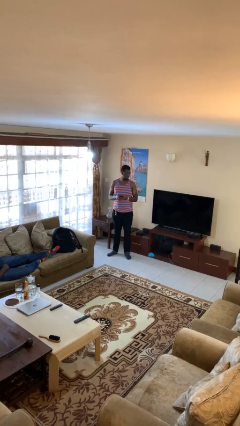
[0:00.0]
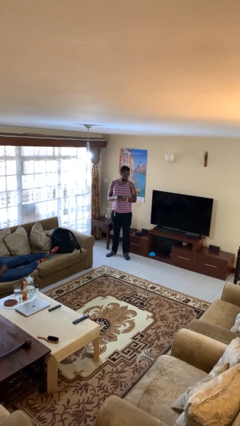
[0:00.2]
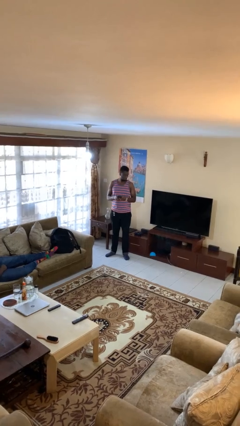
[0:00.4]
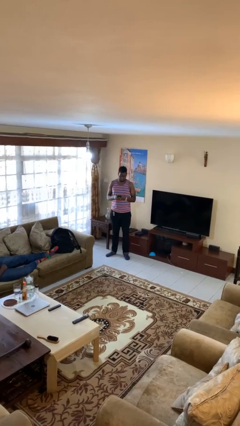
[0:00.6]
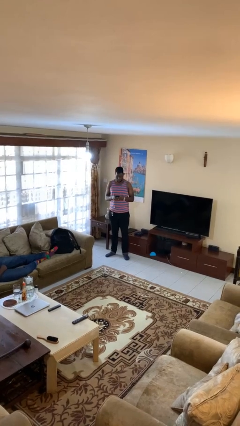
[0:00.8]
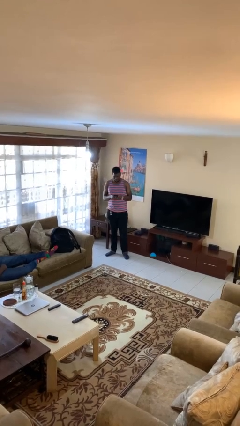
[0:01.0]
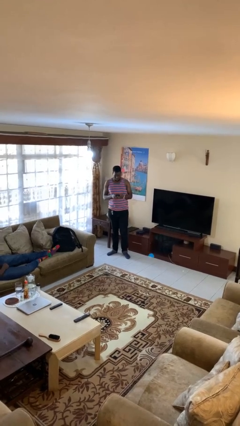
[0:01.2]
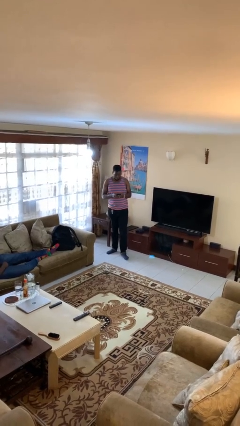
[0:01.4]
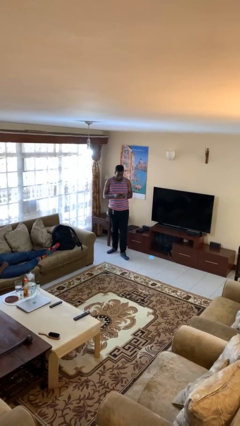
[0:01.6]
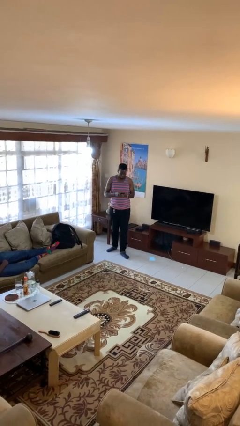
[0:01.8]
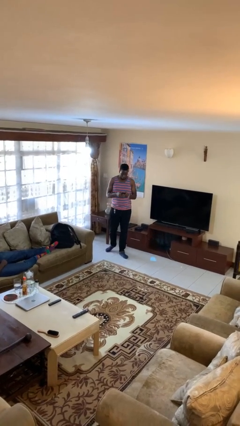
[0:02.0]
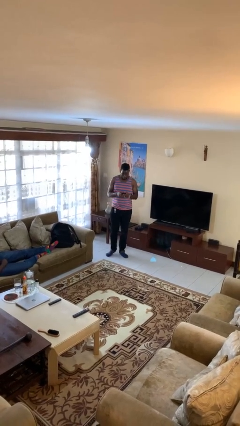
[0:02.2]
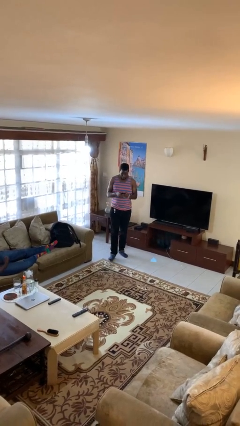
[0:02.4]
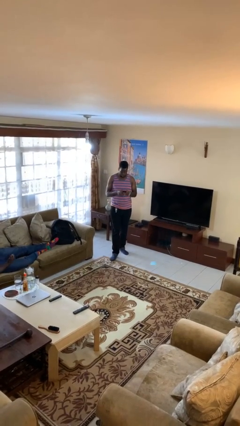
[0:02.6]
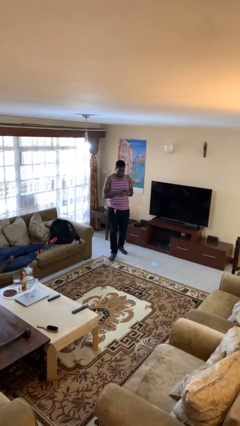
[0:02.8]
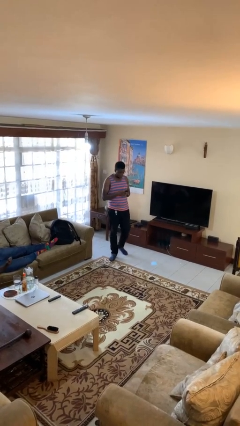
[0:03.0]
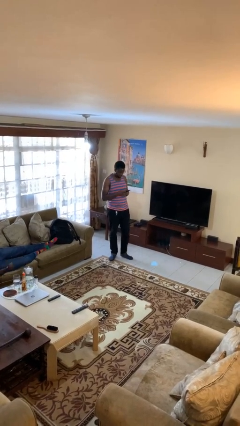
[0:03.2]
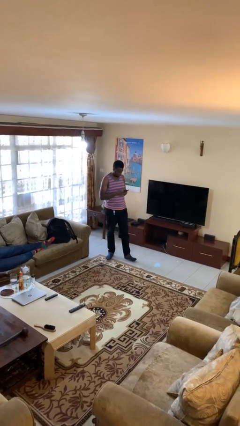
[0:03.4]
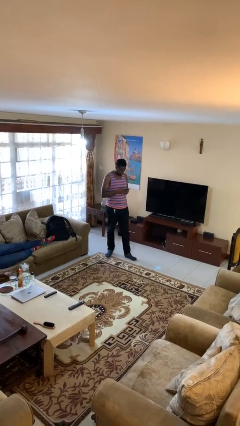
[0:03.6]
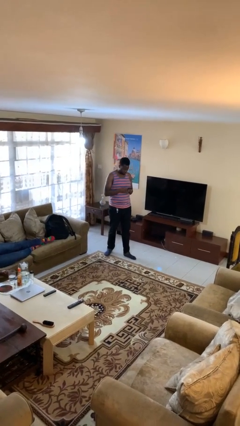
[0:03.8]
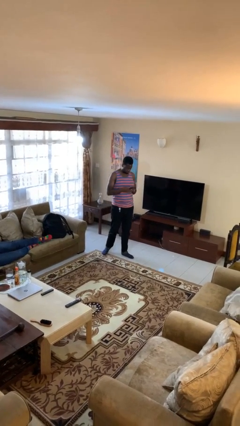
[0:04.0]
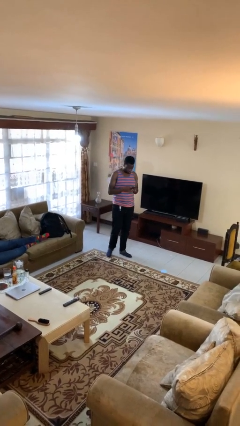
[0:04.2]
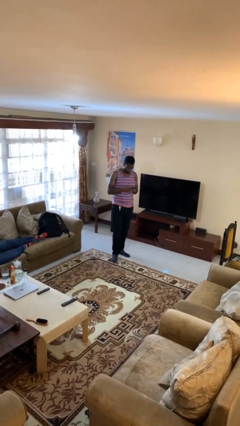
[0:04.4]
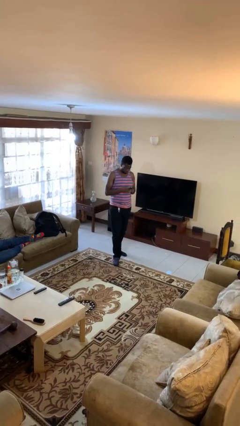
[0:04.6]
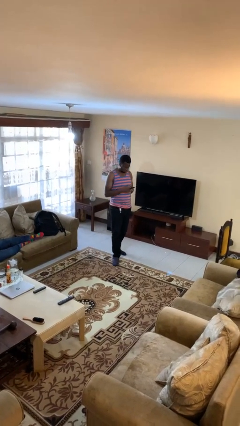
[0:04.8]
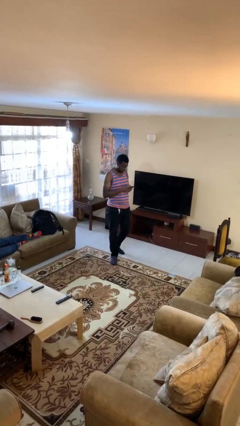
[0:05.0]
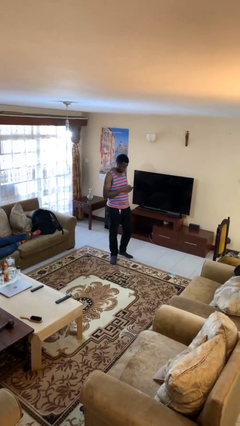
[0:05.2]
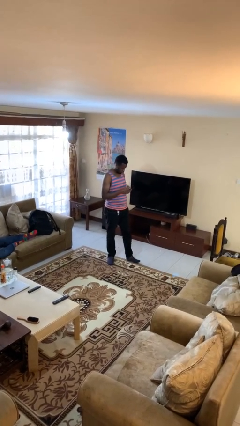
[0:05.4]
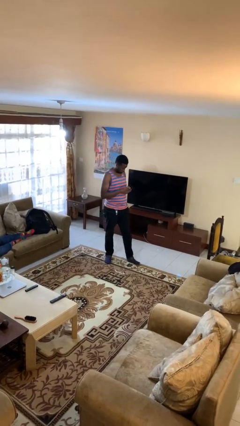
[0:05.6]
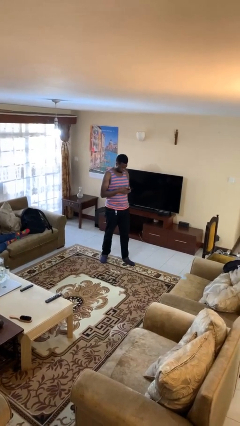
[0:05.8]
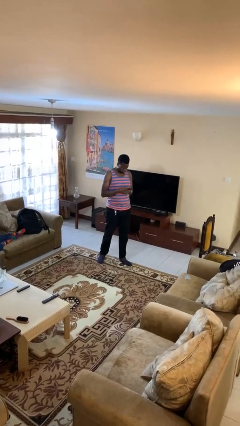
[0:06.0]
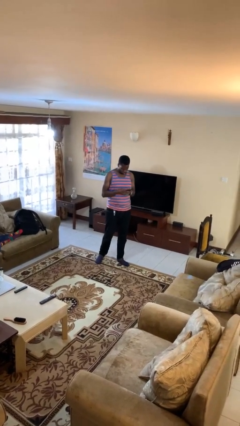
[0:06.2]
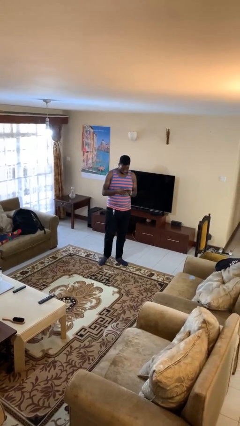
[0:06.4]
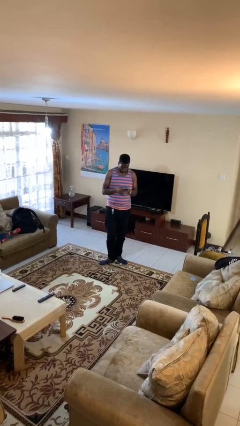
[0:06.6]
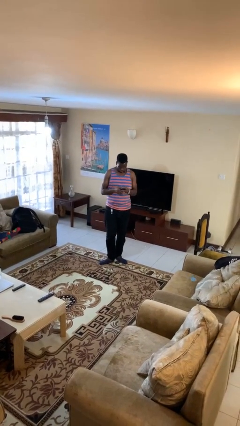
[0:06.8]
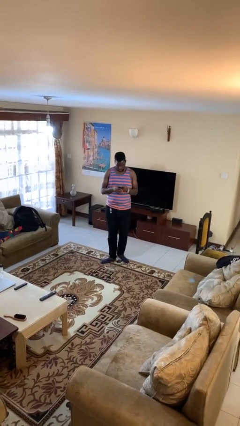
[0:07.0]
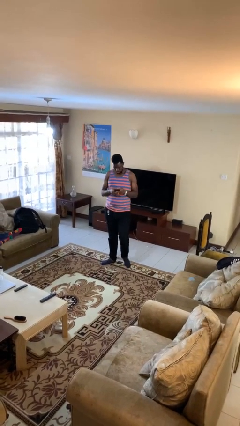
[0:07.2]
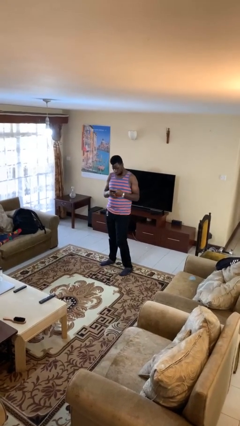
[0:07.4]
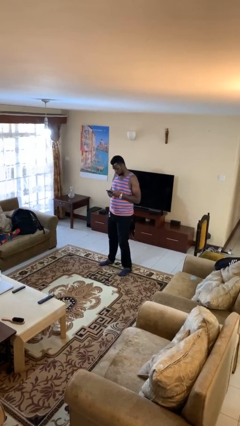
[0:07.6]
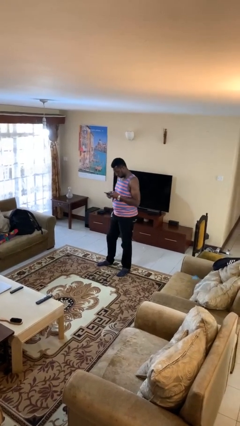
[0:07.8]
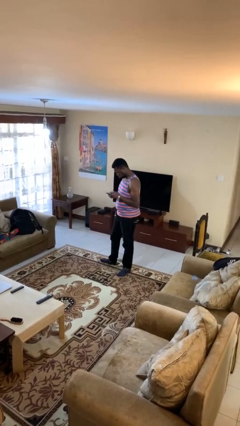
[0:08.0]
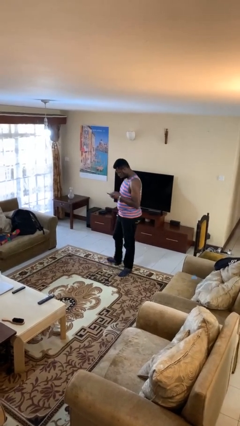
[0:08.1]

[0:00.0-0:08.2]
person texts on phone

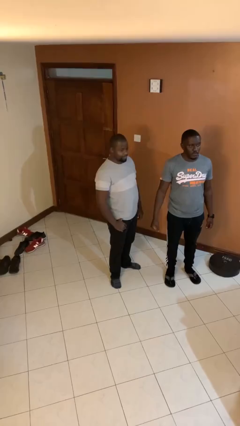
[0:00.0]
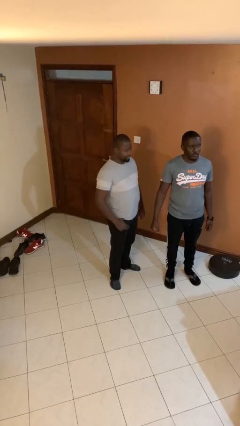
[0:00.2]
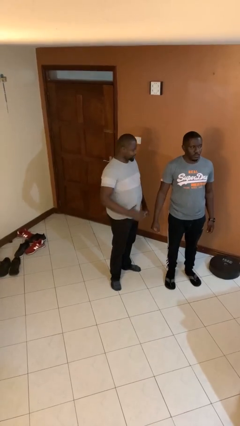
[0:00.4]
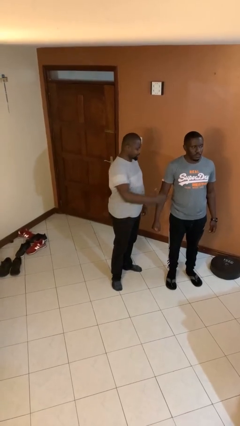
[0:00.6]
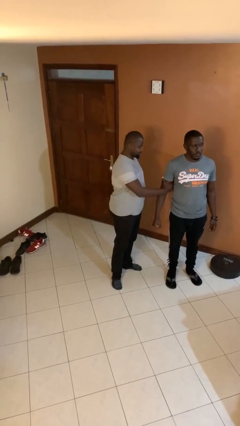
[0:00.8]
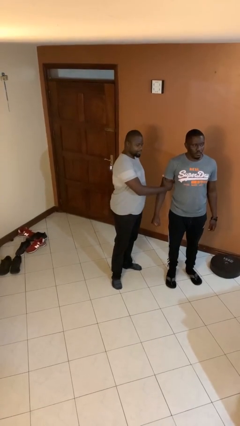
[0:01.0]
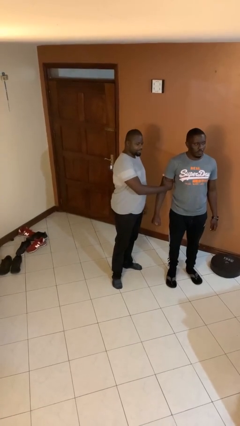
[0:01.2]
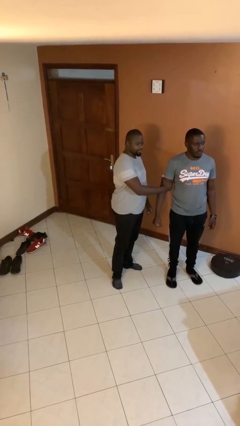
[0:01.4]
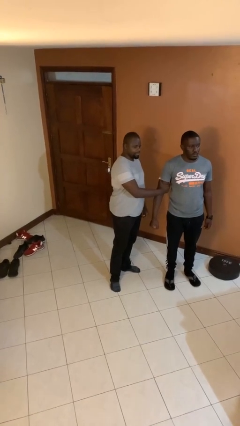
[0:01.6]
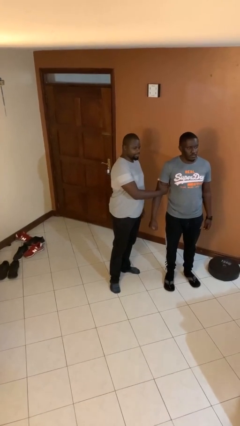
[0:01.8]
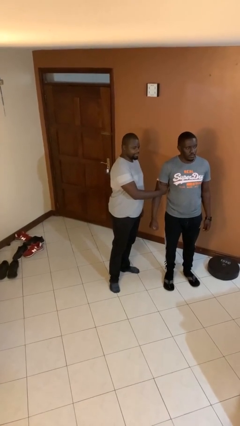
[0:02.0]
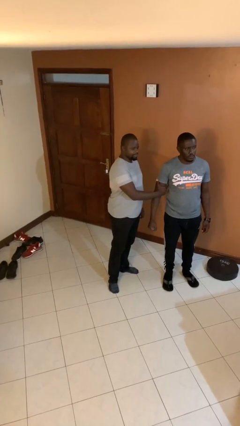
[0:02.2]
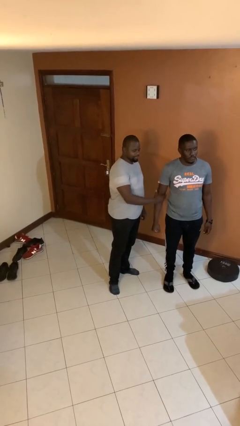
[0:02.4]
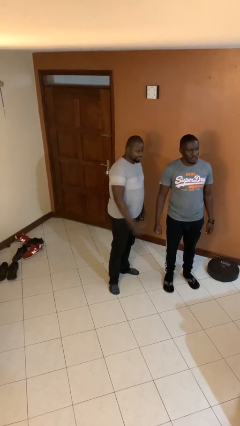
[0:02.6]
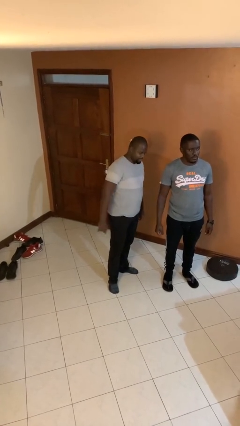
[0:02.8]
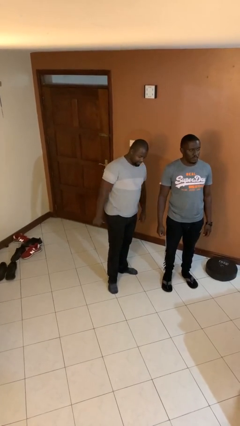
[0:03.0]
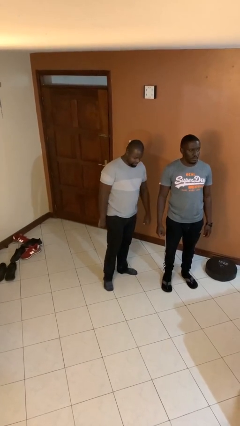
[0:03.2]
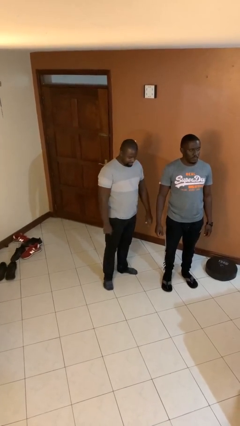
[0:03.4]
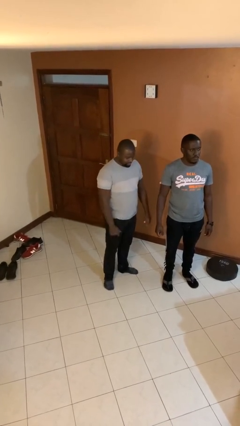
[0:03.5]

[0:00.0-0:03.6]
person grabs person by bicep

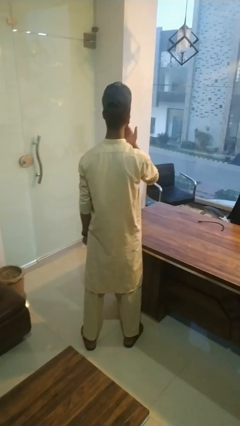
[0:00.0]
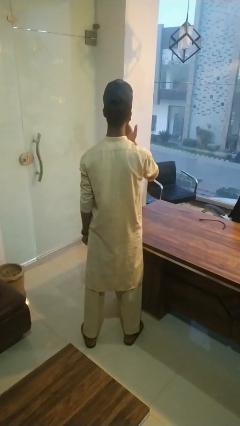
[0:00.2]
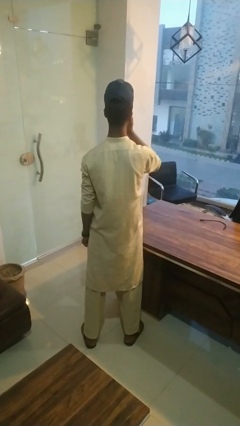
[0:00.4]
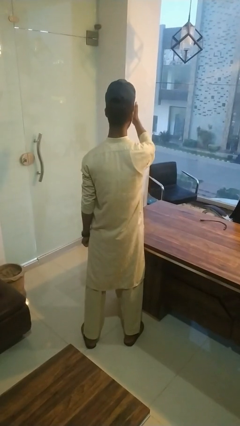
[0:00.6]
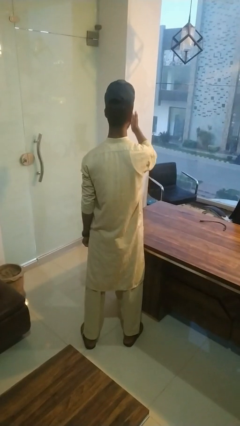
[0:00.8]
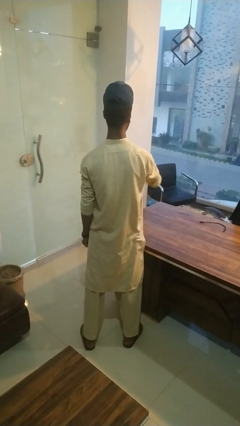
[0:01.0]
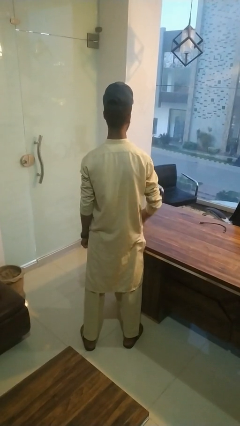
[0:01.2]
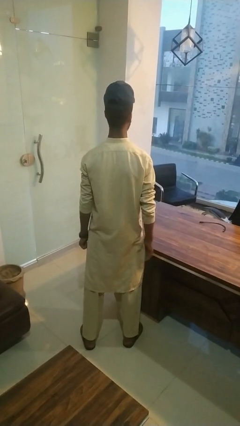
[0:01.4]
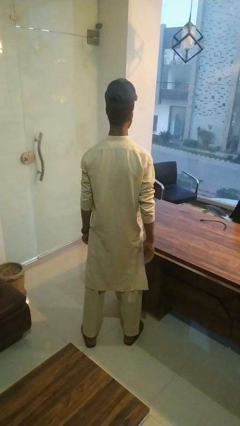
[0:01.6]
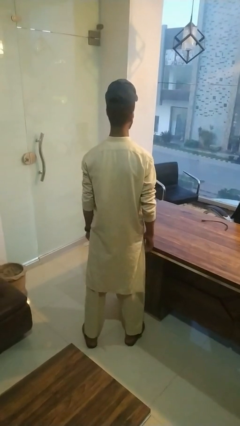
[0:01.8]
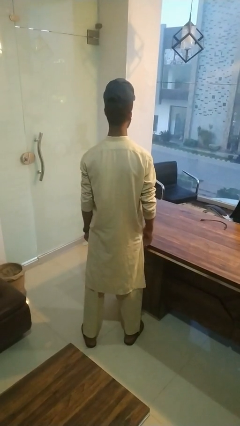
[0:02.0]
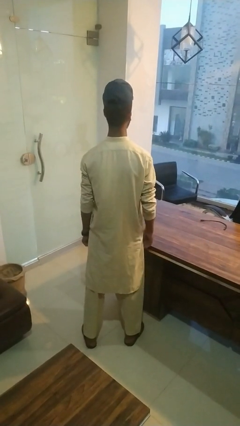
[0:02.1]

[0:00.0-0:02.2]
person gestures blow kiss

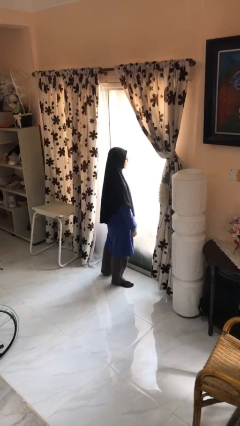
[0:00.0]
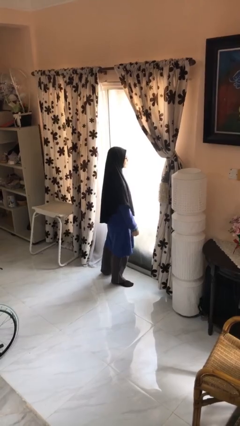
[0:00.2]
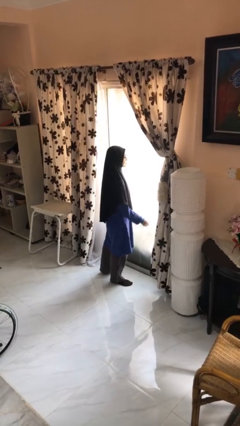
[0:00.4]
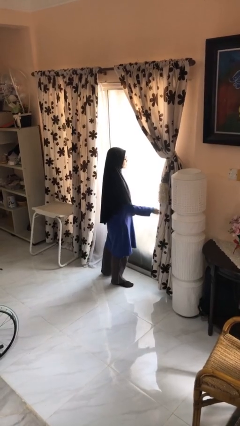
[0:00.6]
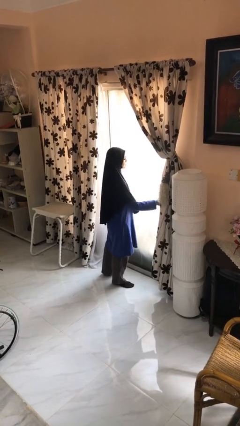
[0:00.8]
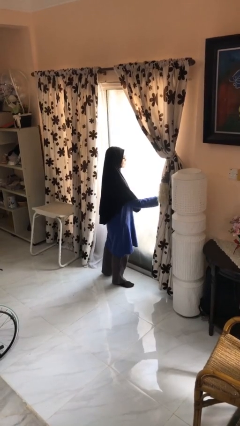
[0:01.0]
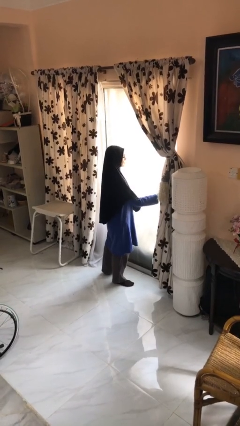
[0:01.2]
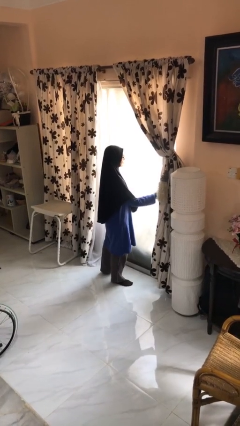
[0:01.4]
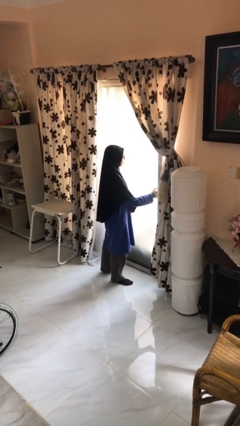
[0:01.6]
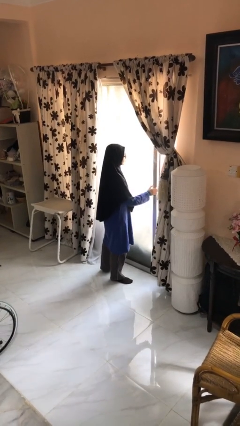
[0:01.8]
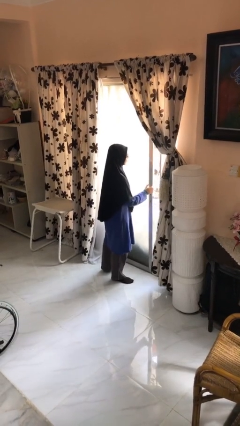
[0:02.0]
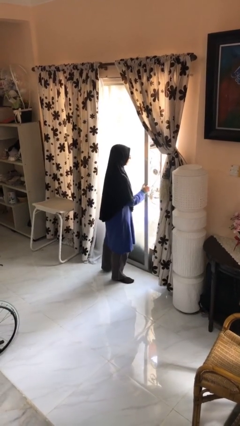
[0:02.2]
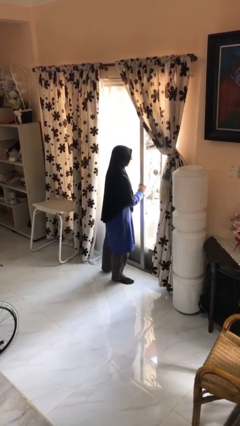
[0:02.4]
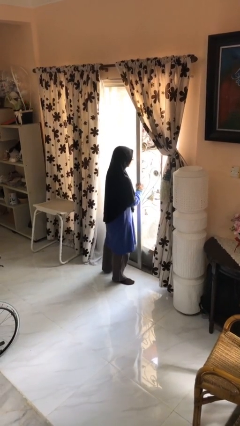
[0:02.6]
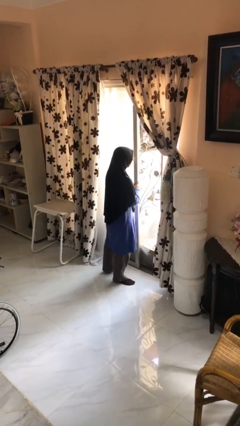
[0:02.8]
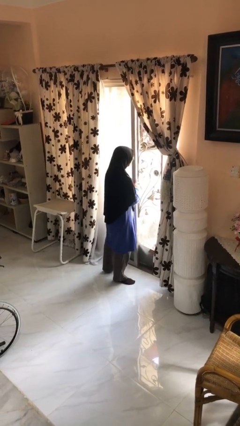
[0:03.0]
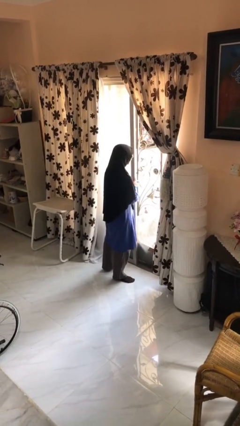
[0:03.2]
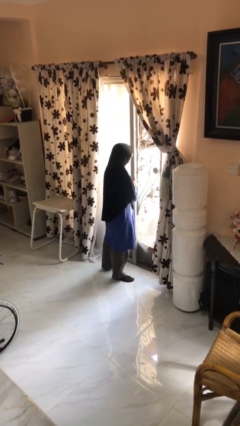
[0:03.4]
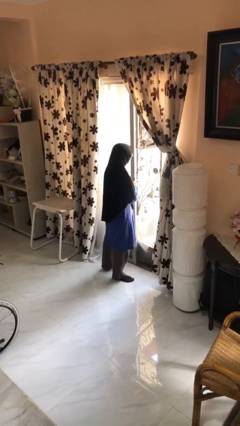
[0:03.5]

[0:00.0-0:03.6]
person opens sliding door

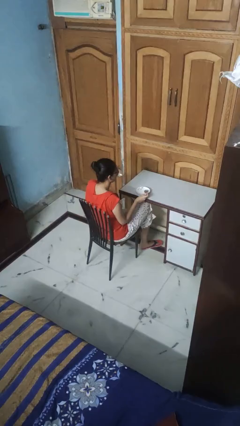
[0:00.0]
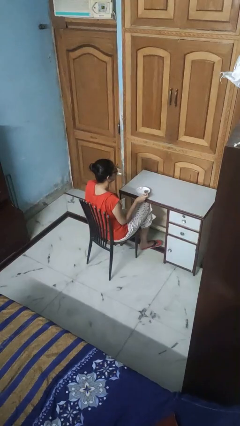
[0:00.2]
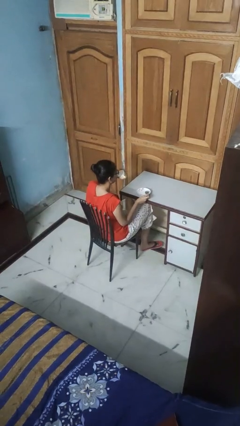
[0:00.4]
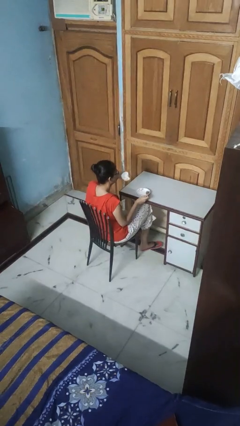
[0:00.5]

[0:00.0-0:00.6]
person drinks from mug
